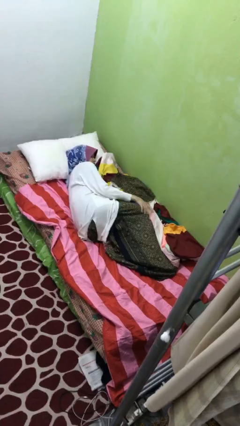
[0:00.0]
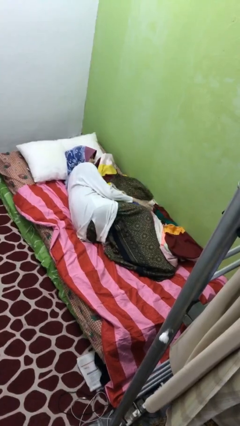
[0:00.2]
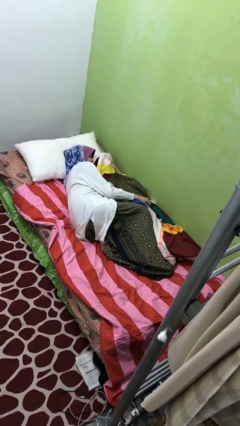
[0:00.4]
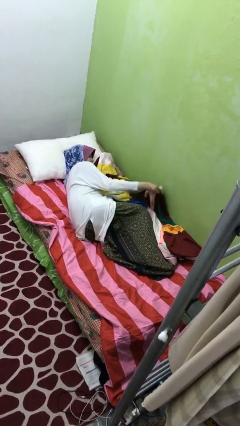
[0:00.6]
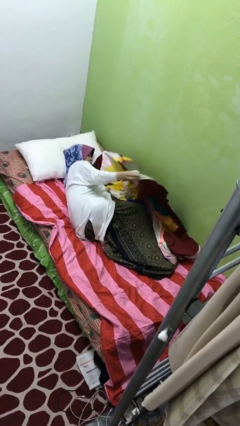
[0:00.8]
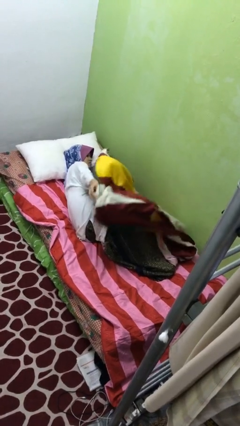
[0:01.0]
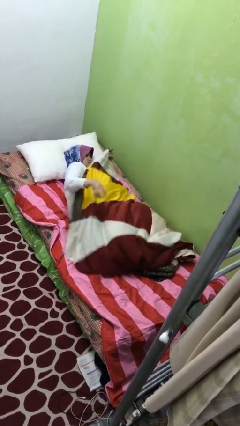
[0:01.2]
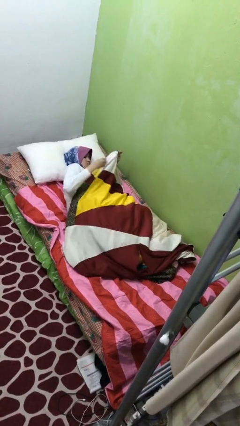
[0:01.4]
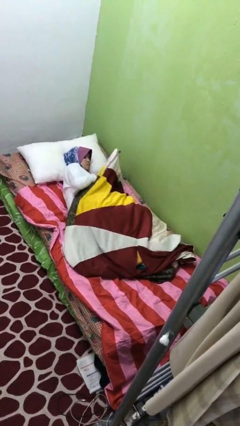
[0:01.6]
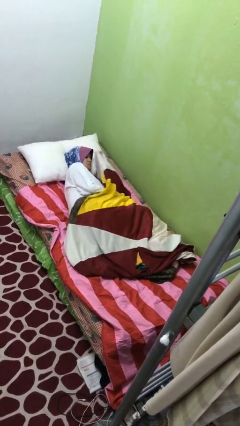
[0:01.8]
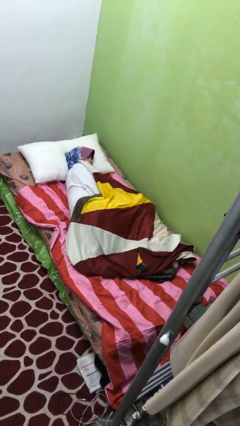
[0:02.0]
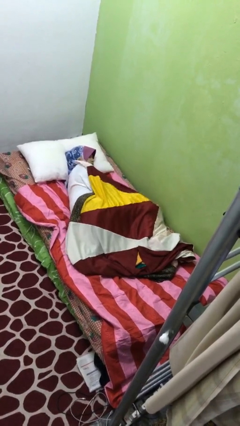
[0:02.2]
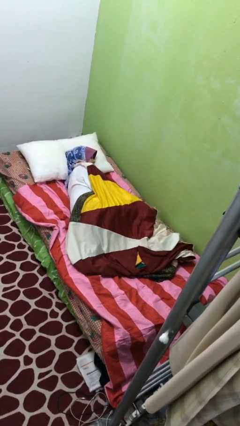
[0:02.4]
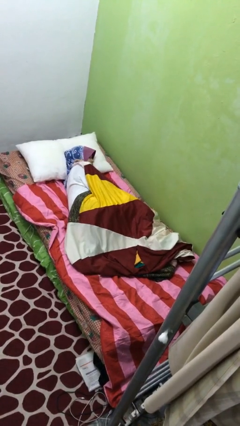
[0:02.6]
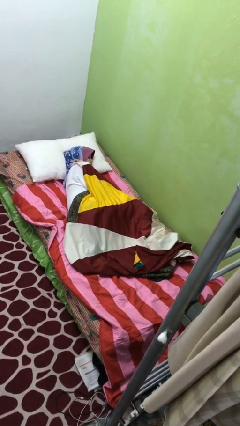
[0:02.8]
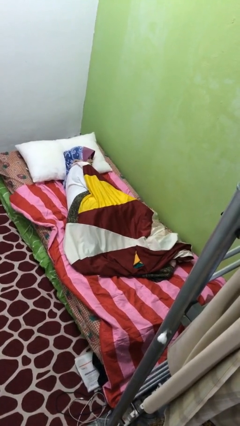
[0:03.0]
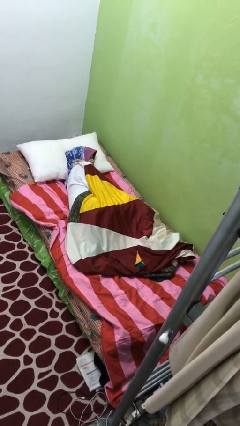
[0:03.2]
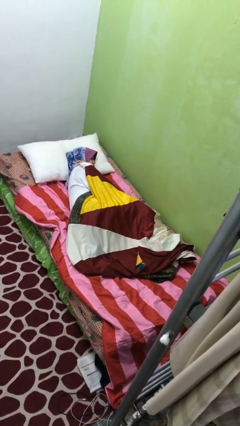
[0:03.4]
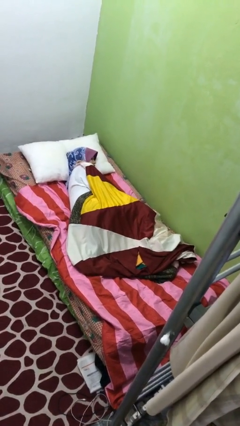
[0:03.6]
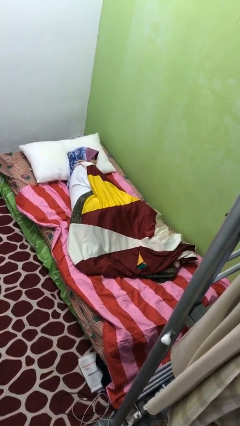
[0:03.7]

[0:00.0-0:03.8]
person covers with blanket

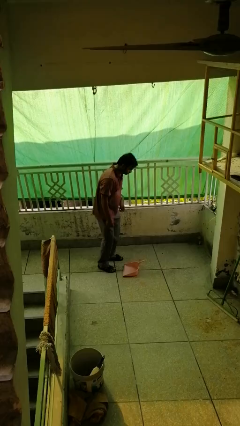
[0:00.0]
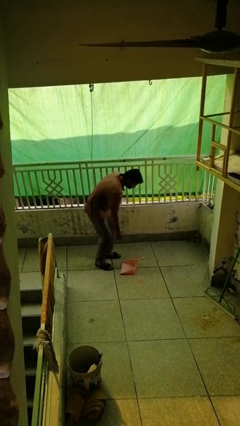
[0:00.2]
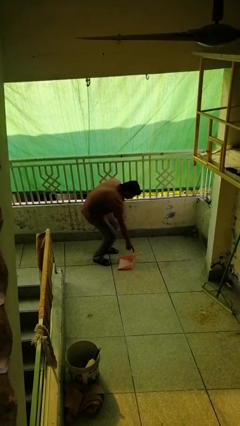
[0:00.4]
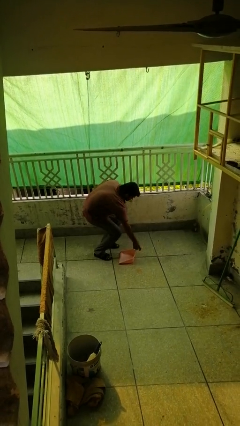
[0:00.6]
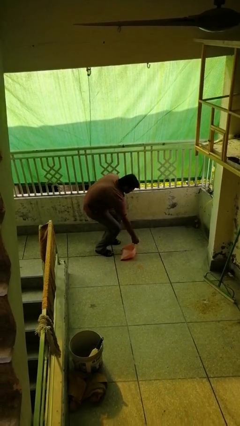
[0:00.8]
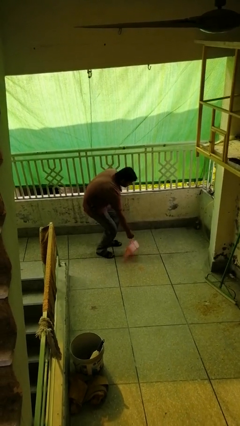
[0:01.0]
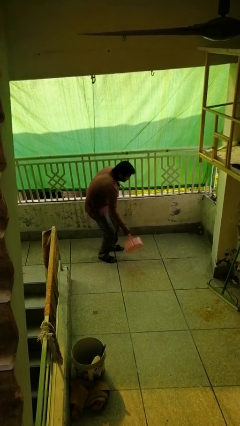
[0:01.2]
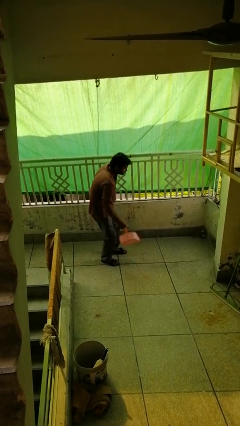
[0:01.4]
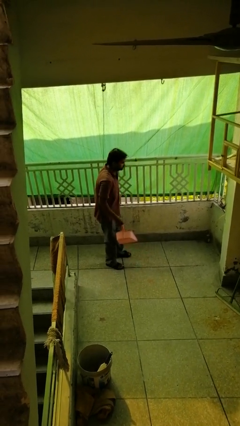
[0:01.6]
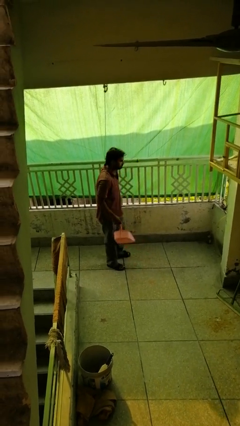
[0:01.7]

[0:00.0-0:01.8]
person picks up object from floor

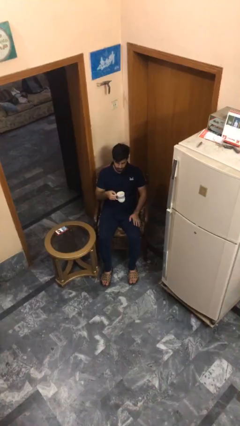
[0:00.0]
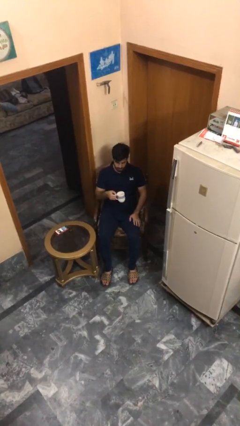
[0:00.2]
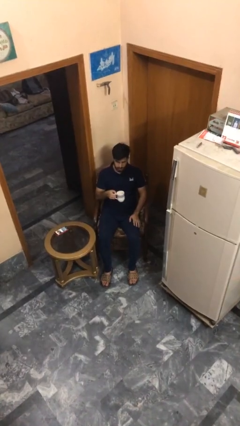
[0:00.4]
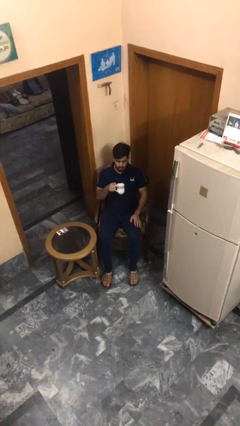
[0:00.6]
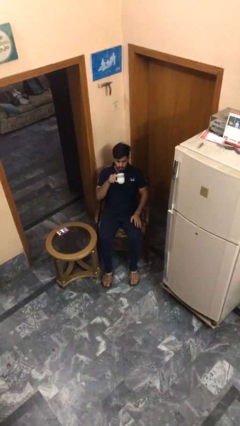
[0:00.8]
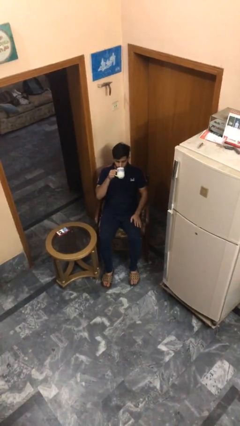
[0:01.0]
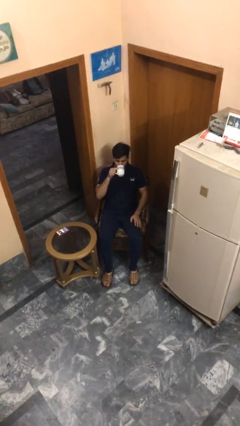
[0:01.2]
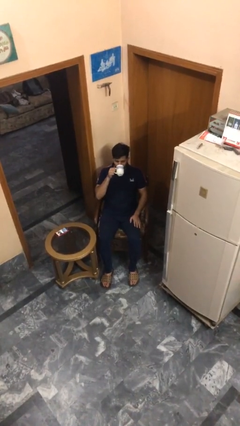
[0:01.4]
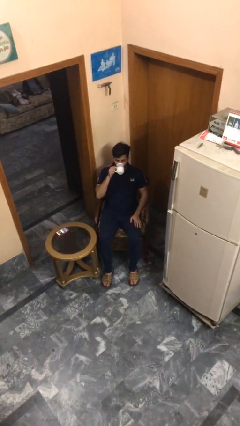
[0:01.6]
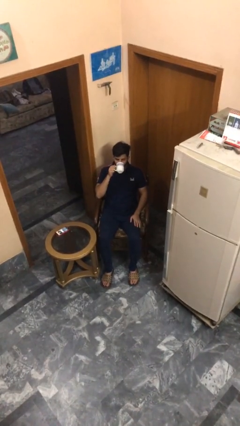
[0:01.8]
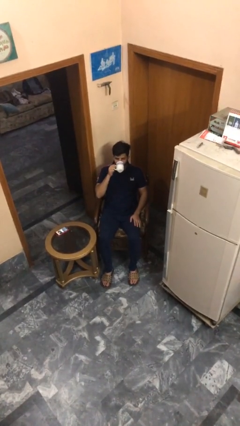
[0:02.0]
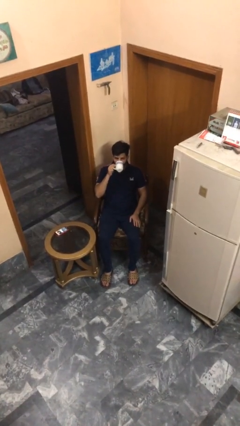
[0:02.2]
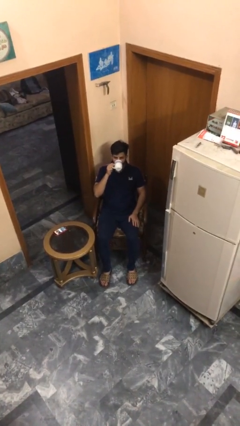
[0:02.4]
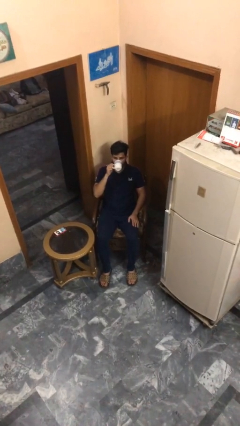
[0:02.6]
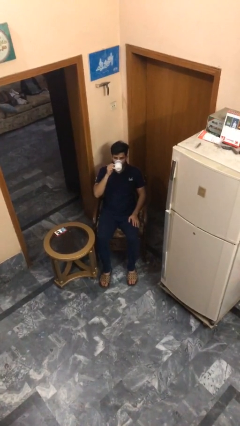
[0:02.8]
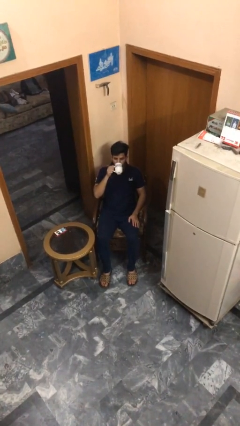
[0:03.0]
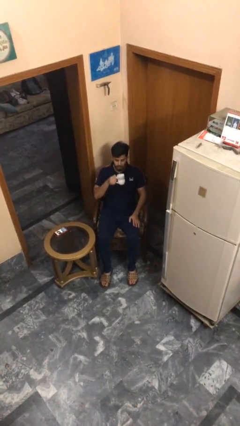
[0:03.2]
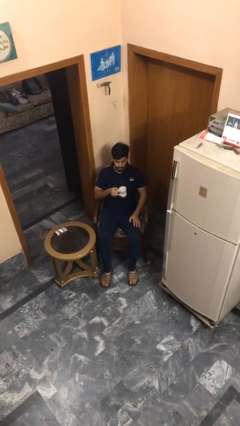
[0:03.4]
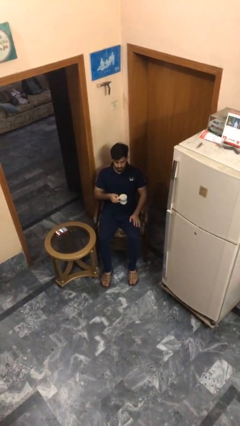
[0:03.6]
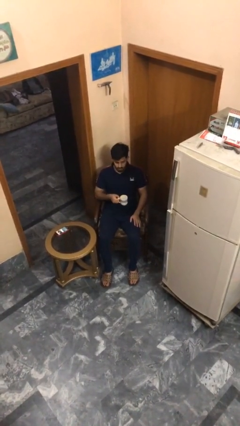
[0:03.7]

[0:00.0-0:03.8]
person drinks from mug

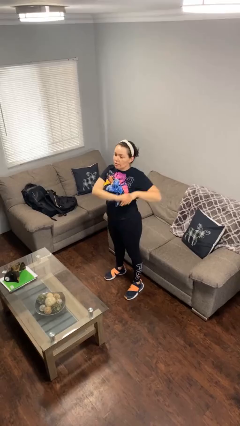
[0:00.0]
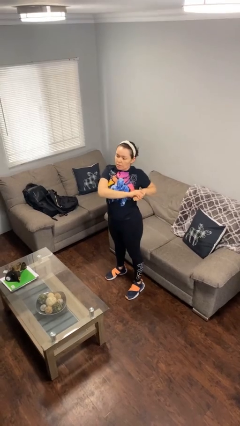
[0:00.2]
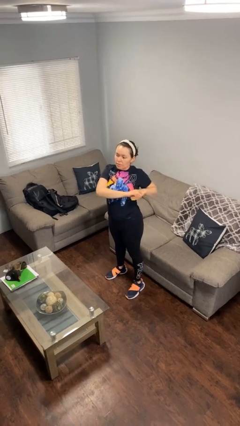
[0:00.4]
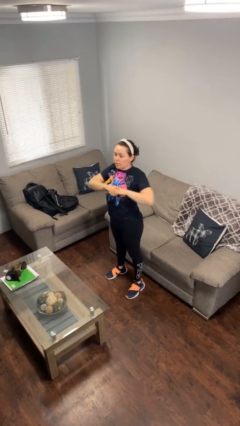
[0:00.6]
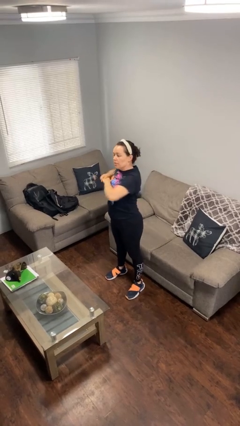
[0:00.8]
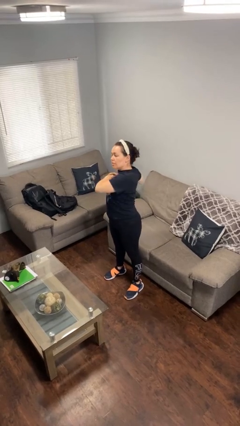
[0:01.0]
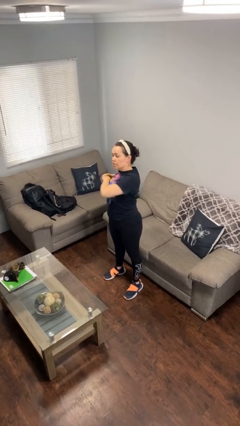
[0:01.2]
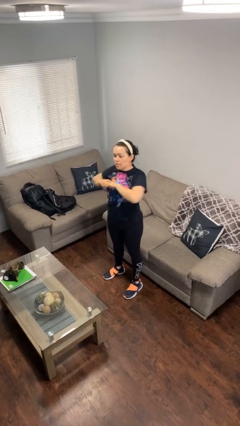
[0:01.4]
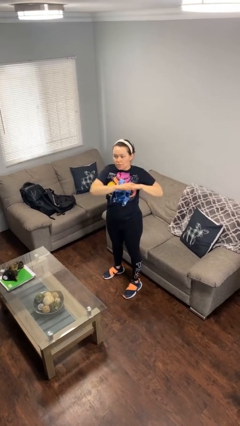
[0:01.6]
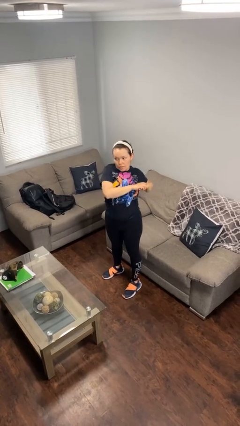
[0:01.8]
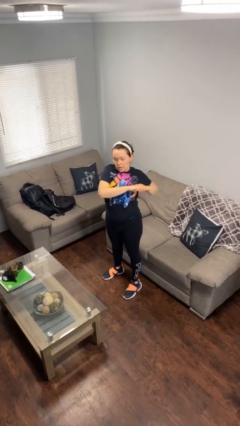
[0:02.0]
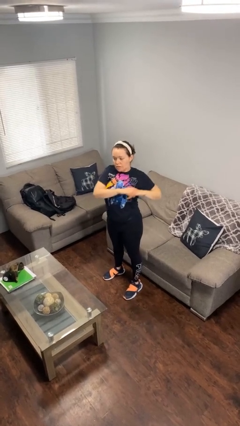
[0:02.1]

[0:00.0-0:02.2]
person stretches arms to side

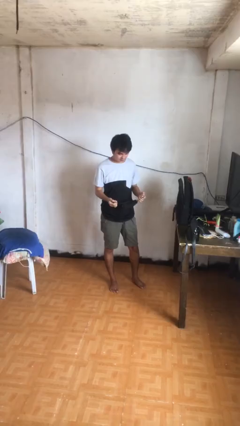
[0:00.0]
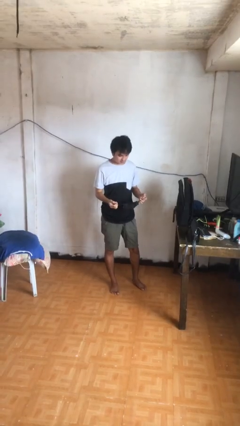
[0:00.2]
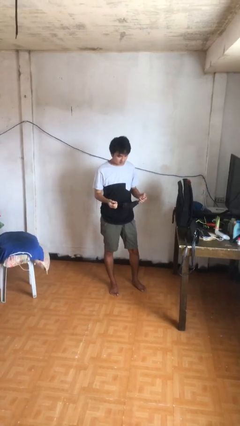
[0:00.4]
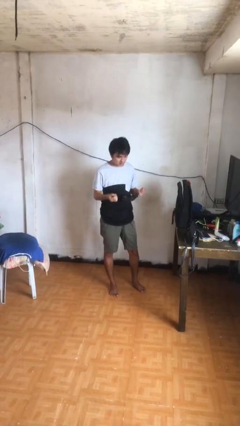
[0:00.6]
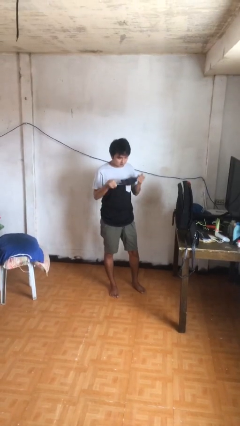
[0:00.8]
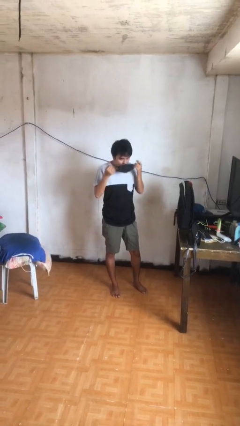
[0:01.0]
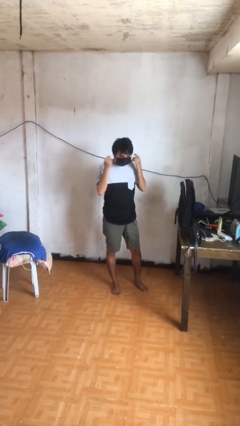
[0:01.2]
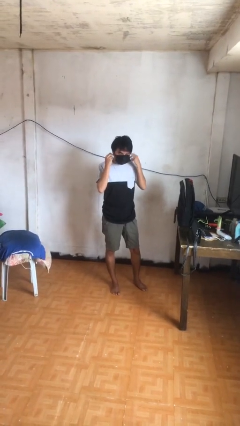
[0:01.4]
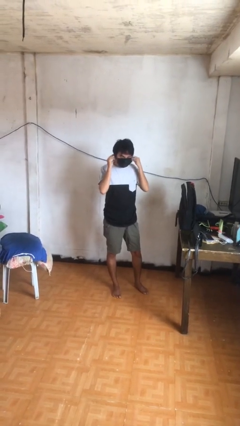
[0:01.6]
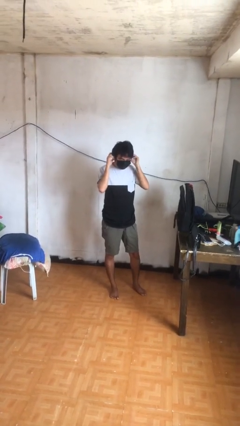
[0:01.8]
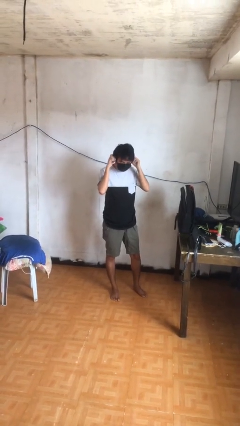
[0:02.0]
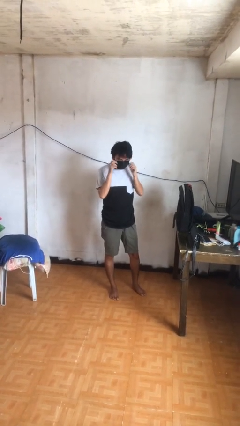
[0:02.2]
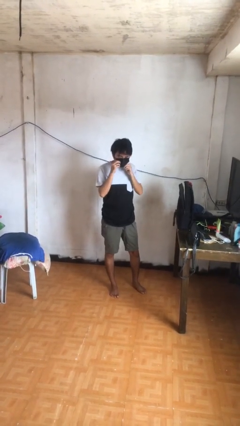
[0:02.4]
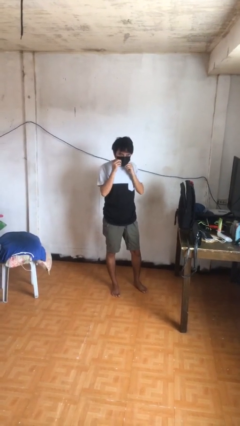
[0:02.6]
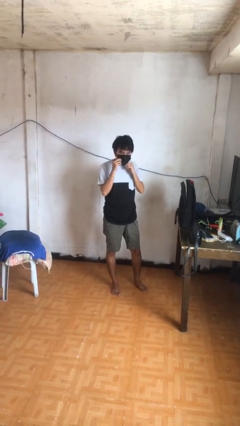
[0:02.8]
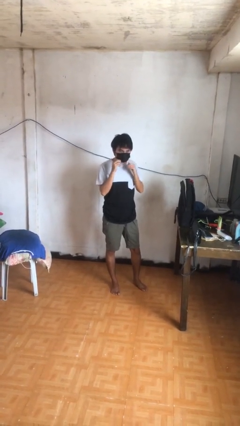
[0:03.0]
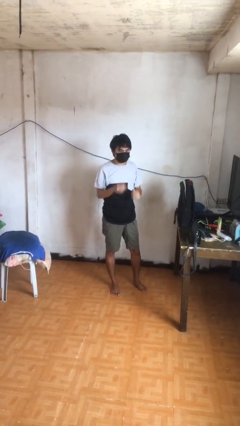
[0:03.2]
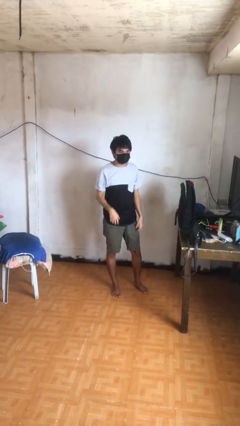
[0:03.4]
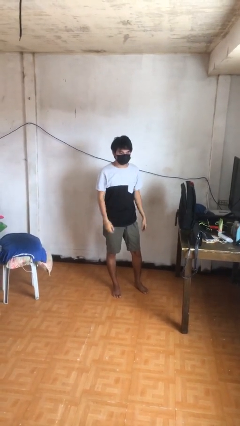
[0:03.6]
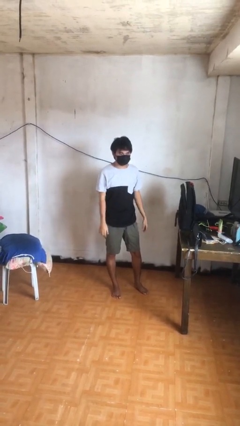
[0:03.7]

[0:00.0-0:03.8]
person puts on facemask

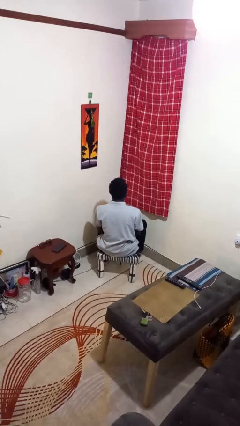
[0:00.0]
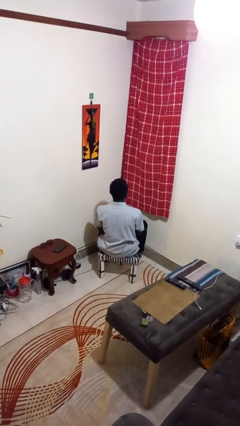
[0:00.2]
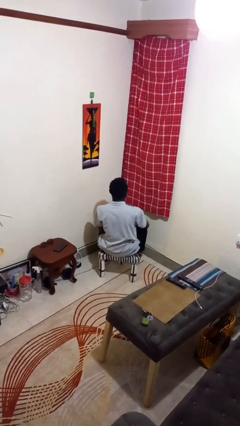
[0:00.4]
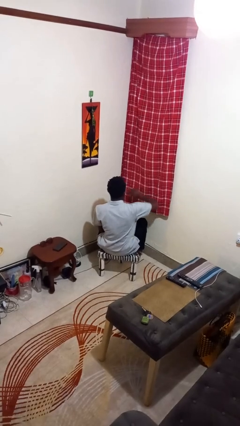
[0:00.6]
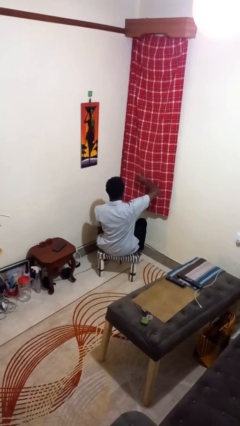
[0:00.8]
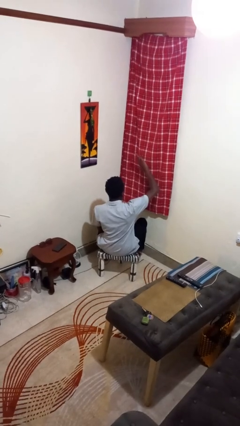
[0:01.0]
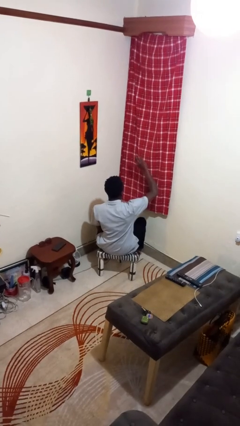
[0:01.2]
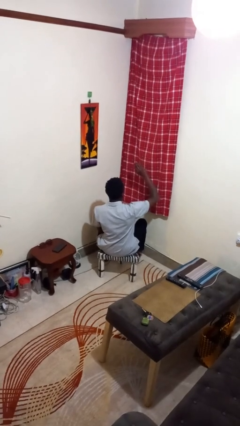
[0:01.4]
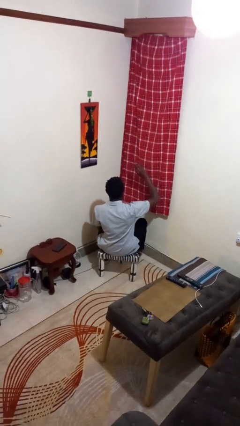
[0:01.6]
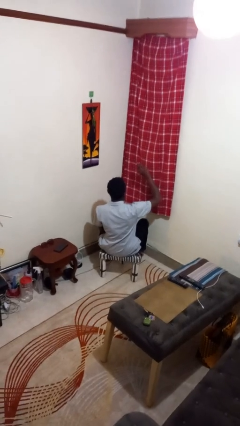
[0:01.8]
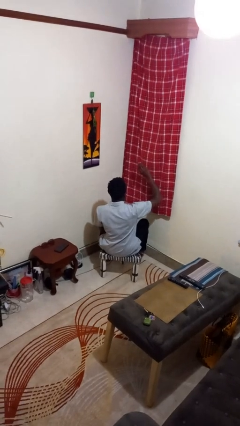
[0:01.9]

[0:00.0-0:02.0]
person gestures swipe up
